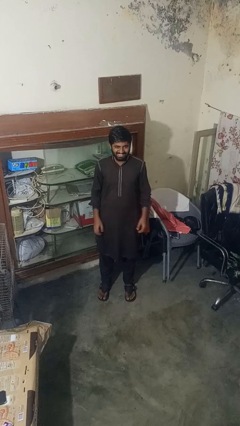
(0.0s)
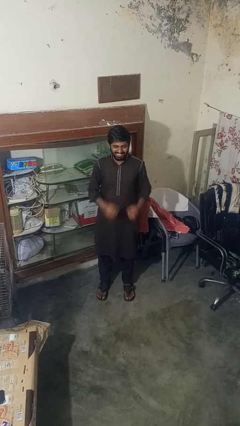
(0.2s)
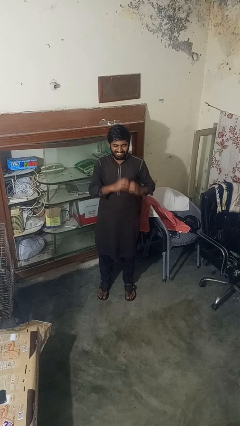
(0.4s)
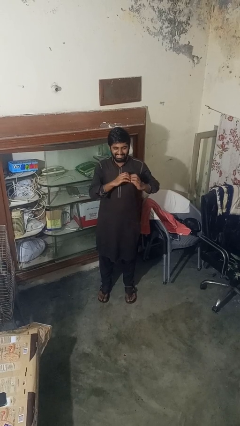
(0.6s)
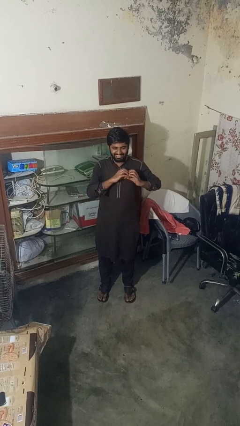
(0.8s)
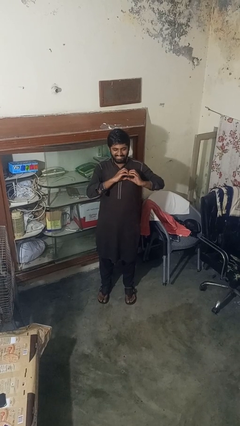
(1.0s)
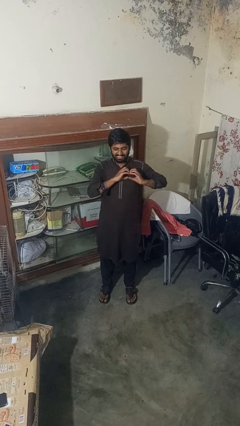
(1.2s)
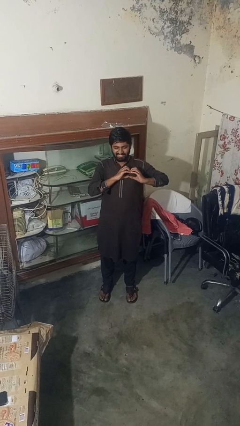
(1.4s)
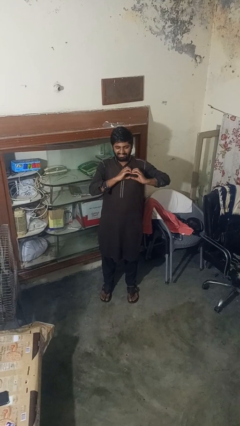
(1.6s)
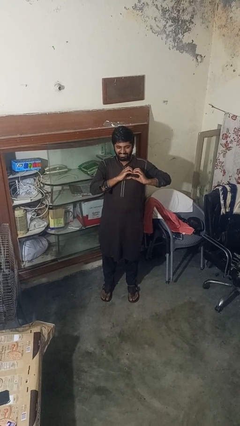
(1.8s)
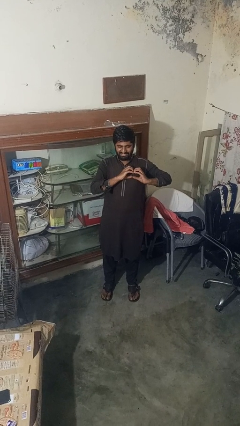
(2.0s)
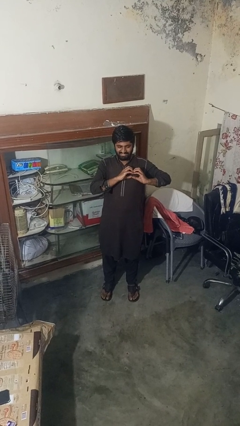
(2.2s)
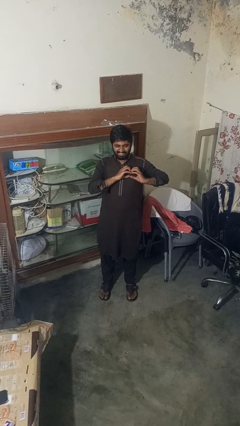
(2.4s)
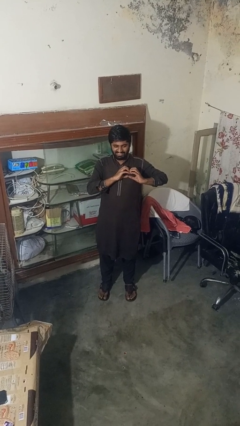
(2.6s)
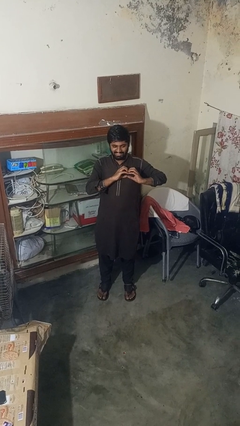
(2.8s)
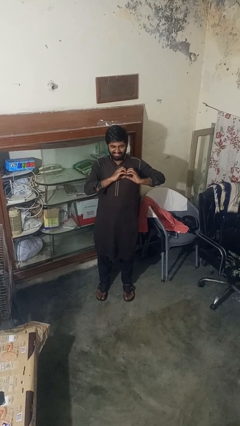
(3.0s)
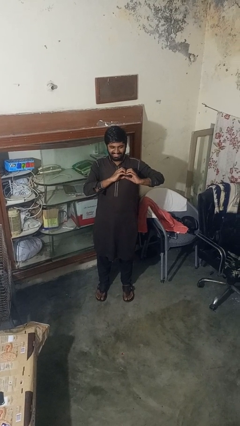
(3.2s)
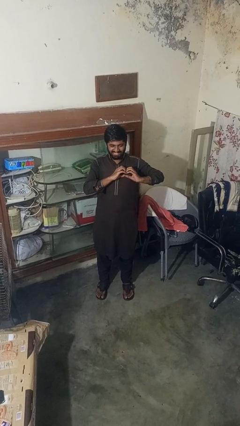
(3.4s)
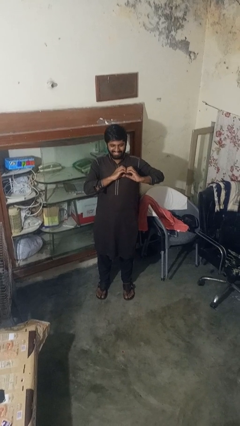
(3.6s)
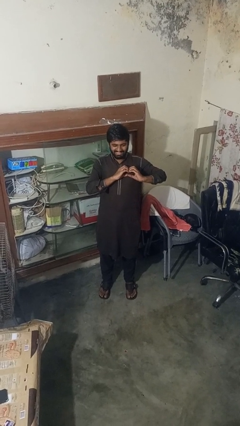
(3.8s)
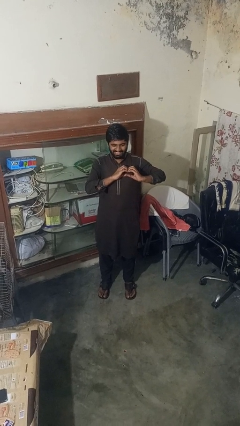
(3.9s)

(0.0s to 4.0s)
person gestures heart

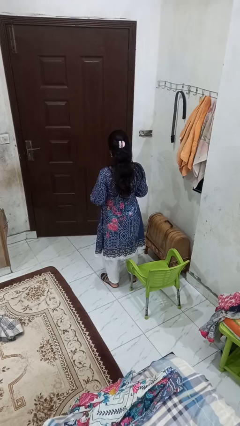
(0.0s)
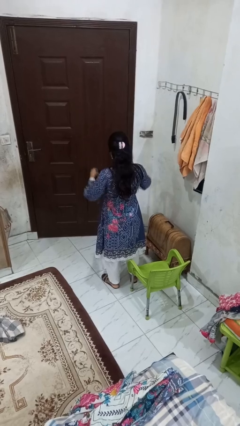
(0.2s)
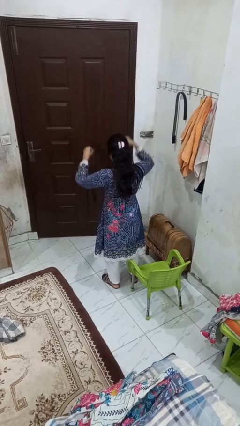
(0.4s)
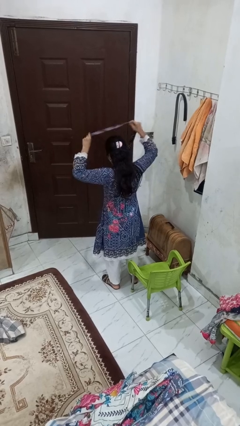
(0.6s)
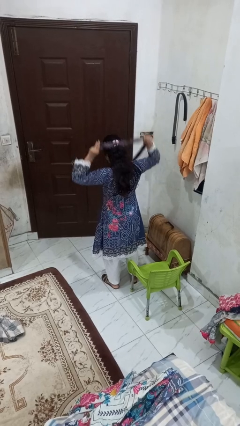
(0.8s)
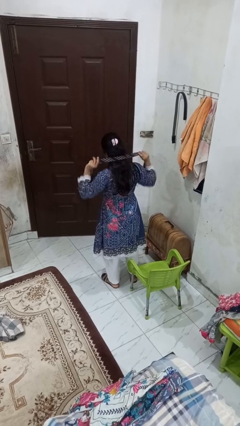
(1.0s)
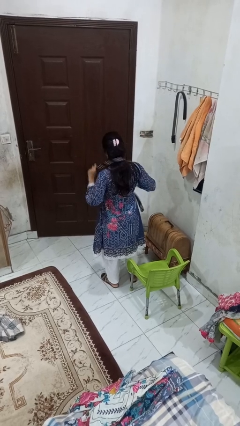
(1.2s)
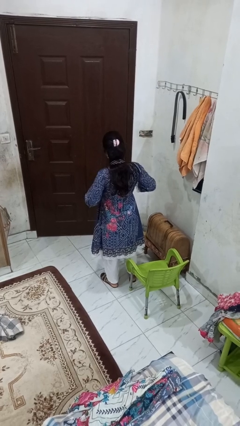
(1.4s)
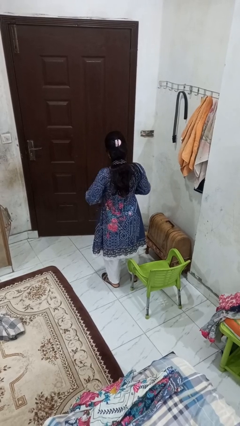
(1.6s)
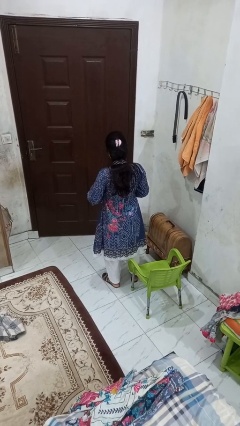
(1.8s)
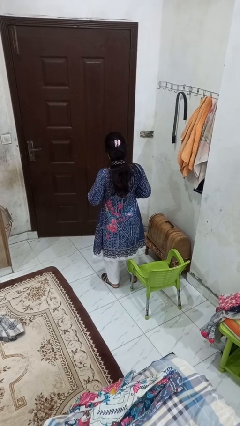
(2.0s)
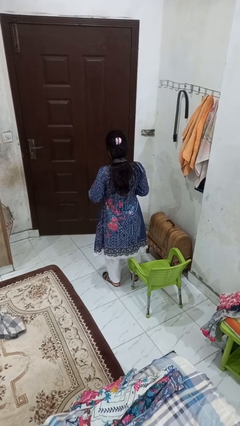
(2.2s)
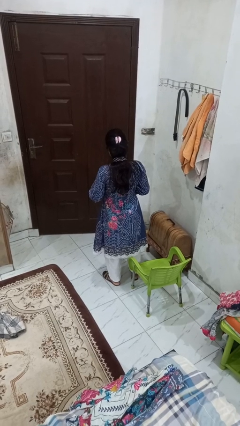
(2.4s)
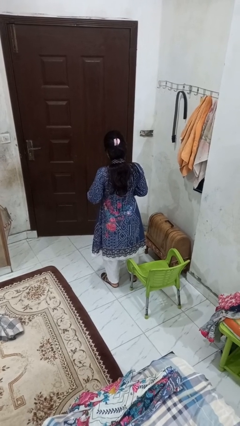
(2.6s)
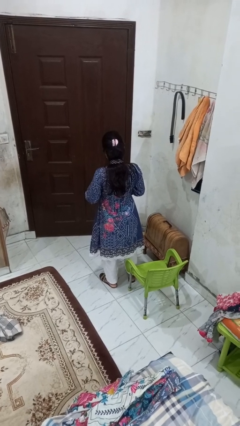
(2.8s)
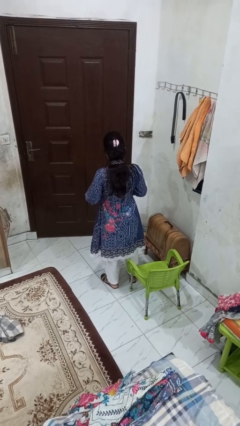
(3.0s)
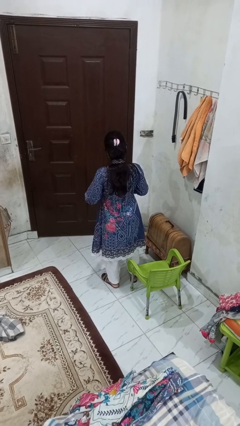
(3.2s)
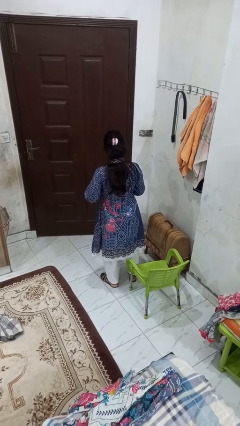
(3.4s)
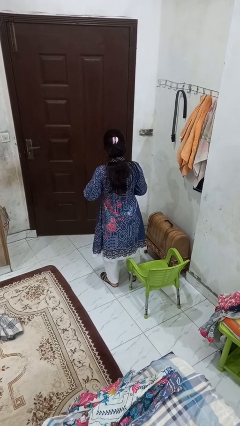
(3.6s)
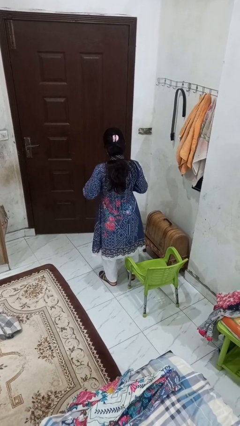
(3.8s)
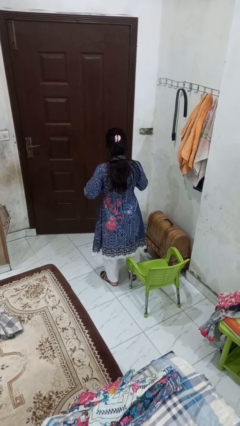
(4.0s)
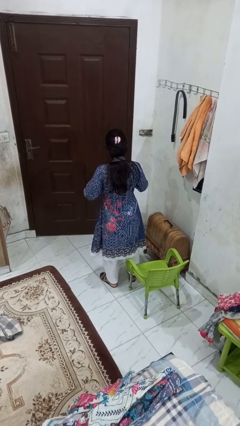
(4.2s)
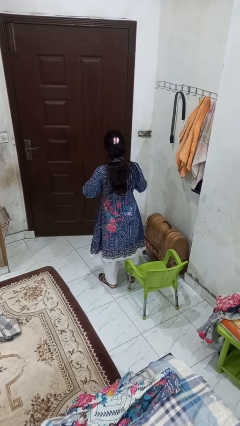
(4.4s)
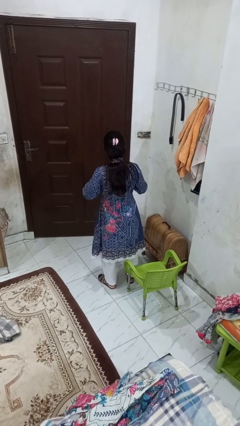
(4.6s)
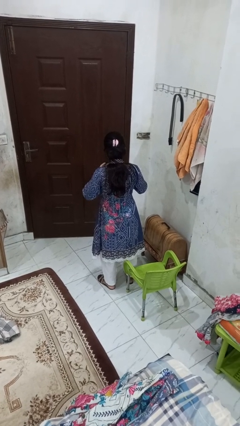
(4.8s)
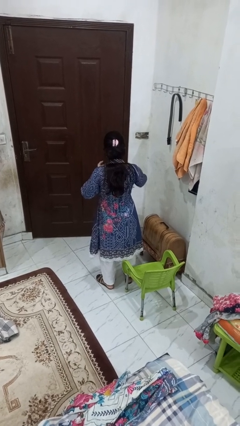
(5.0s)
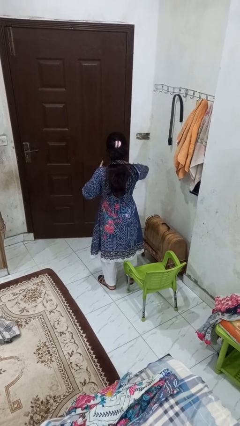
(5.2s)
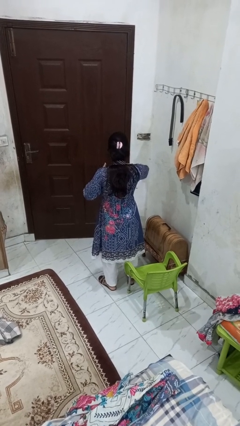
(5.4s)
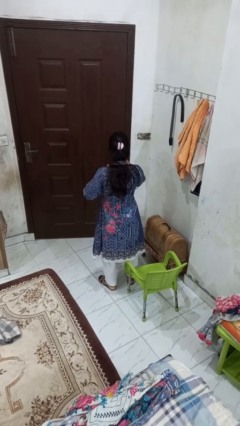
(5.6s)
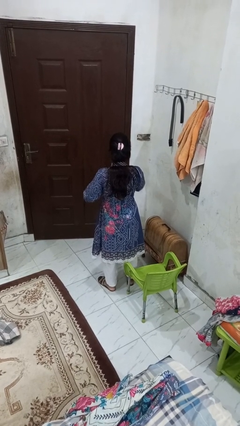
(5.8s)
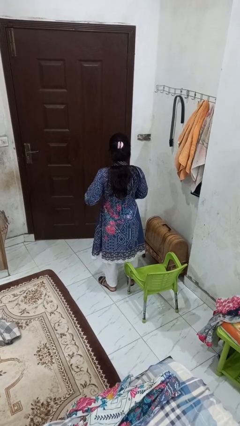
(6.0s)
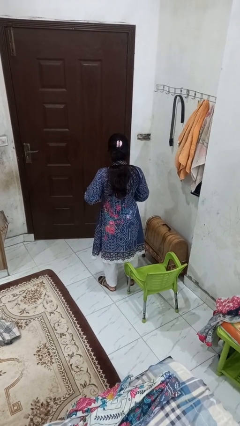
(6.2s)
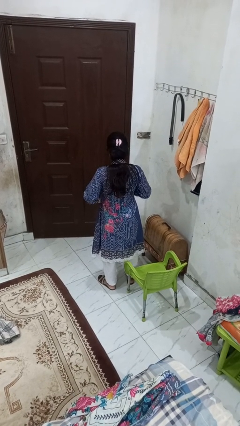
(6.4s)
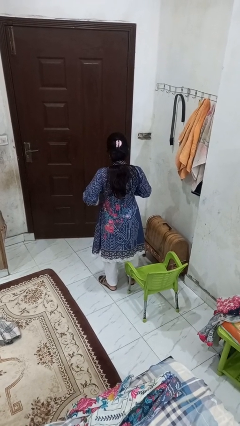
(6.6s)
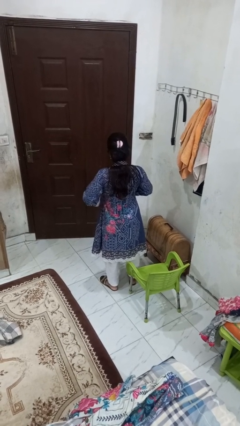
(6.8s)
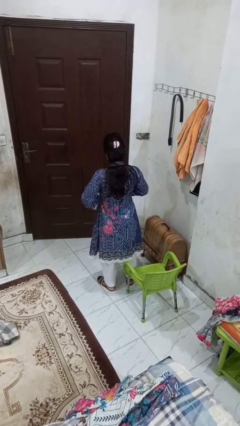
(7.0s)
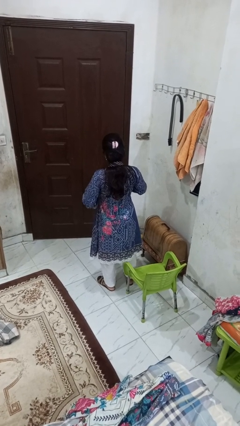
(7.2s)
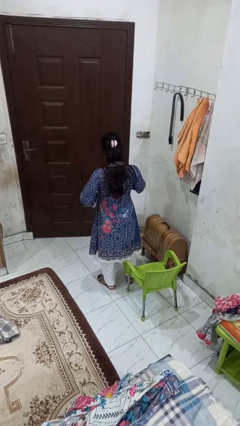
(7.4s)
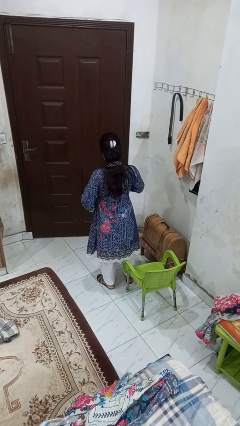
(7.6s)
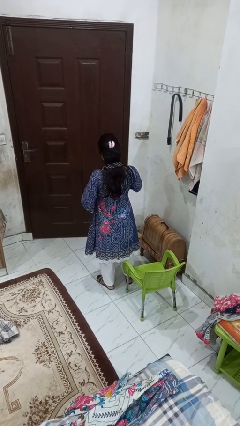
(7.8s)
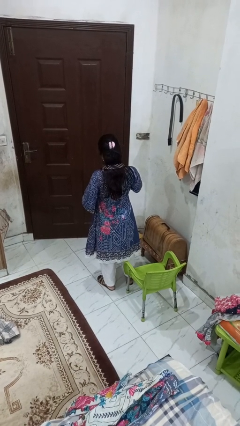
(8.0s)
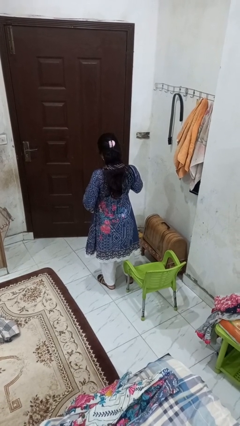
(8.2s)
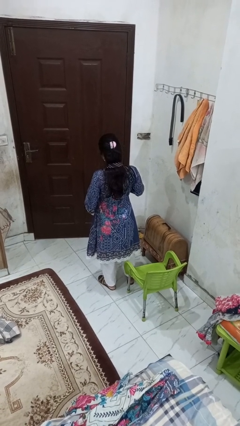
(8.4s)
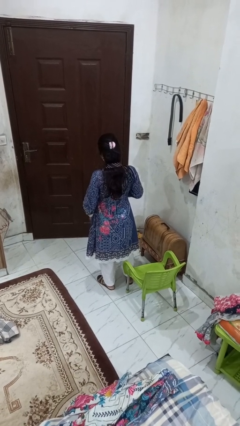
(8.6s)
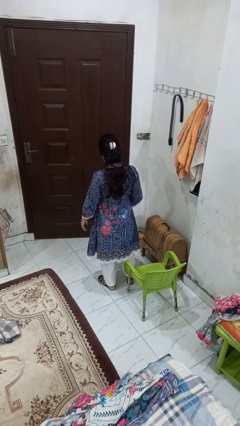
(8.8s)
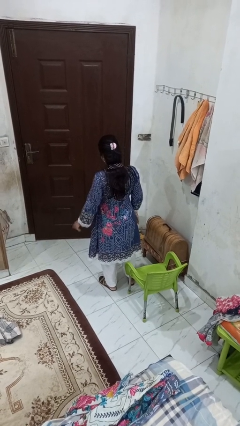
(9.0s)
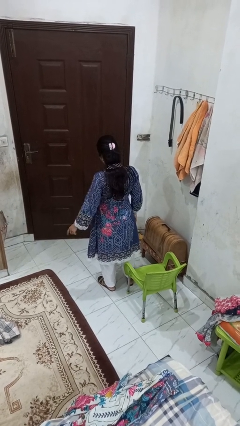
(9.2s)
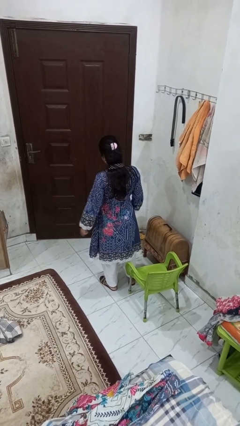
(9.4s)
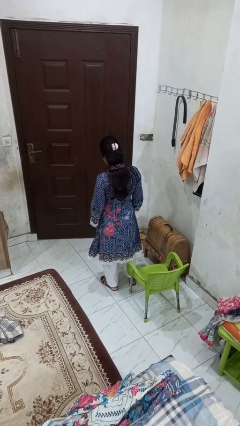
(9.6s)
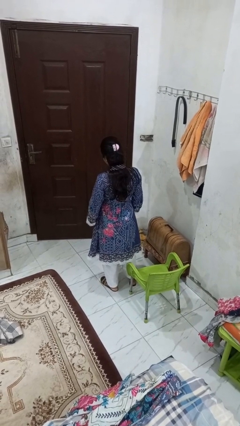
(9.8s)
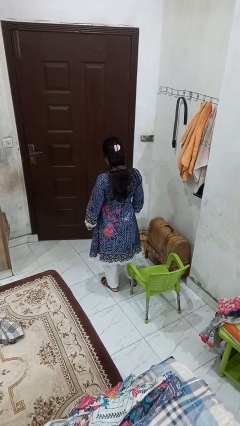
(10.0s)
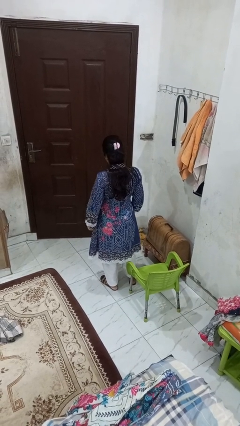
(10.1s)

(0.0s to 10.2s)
person puts on necktie

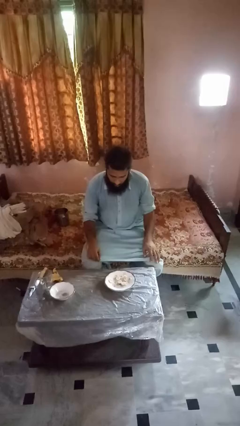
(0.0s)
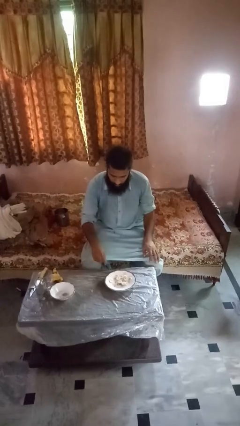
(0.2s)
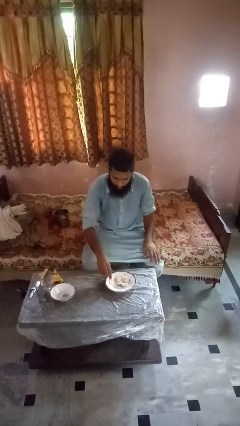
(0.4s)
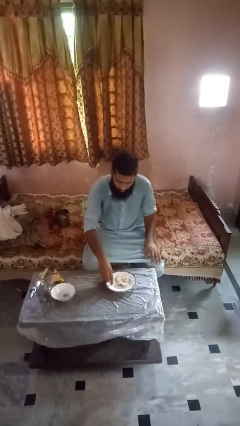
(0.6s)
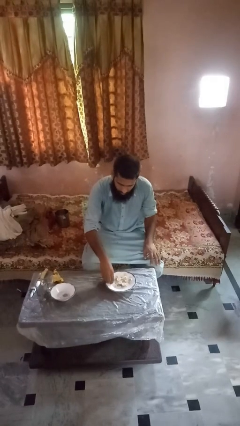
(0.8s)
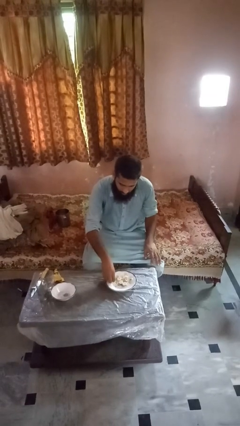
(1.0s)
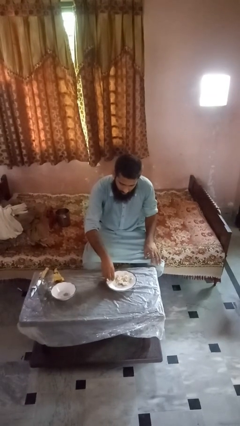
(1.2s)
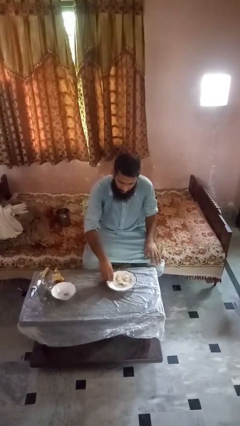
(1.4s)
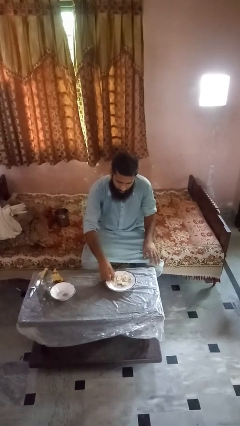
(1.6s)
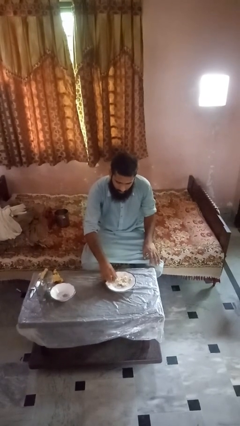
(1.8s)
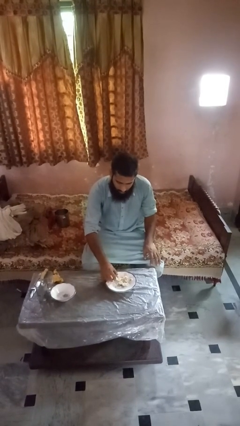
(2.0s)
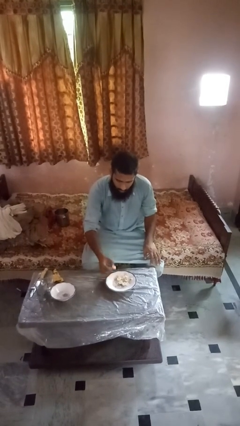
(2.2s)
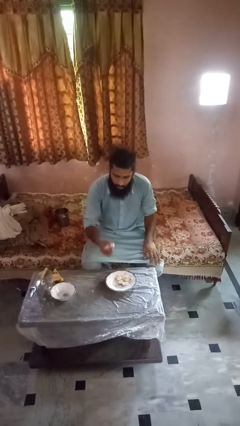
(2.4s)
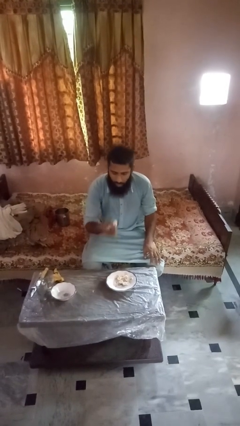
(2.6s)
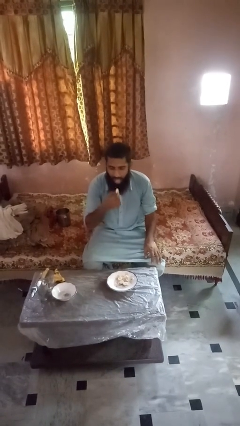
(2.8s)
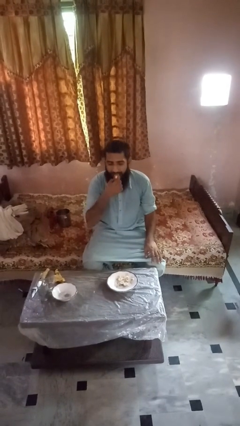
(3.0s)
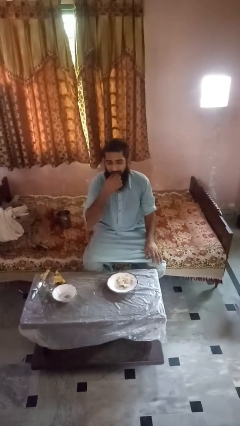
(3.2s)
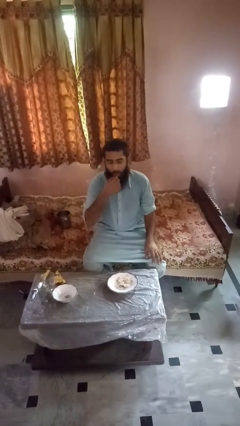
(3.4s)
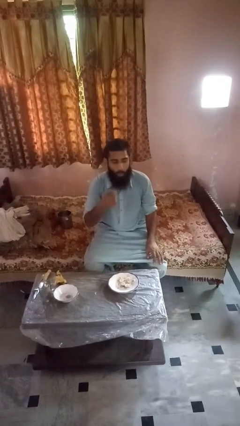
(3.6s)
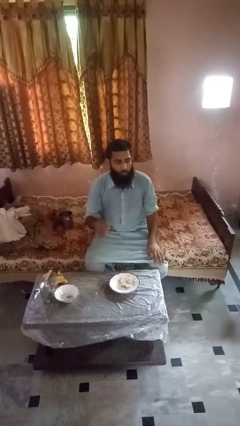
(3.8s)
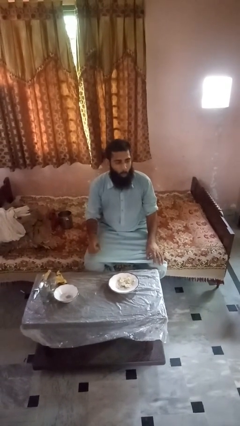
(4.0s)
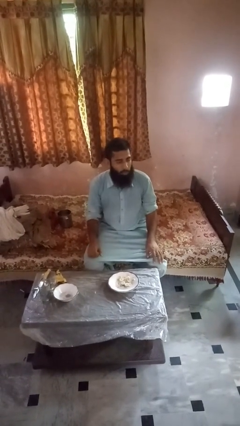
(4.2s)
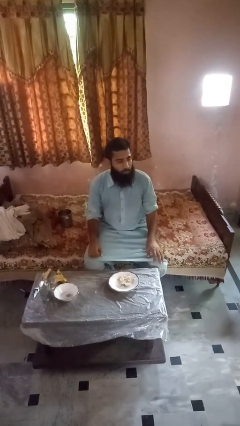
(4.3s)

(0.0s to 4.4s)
person eats with hands
